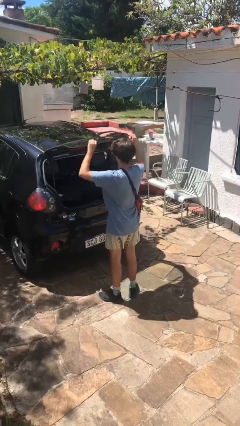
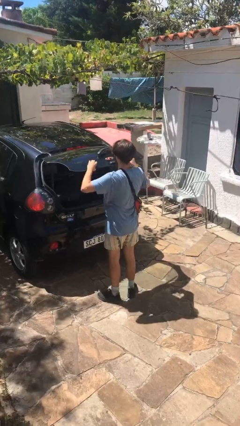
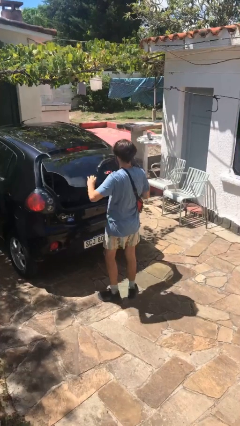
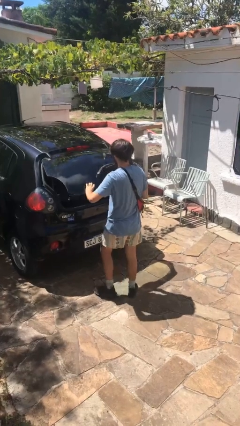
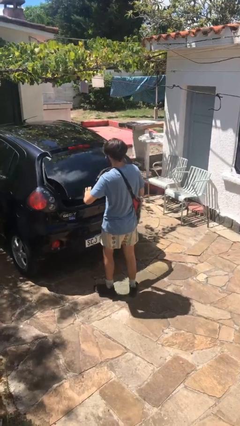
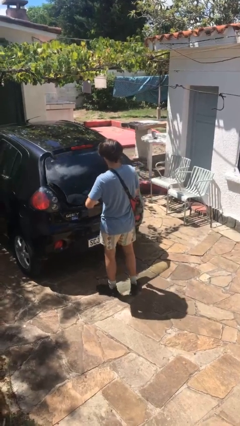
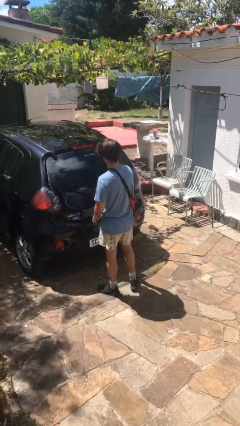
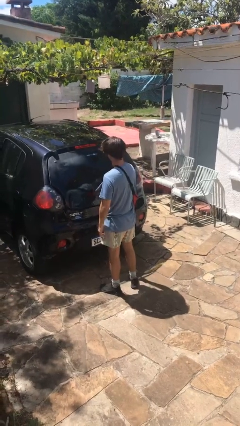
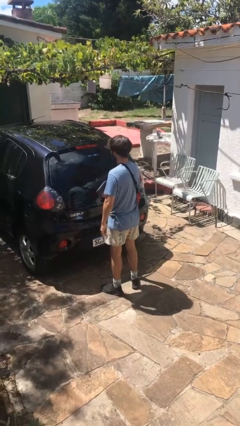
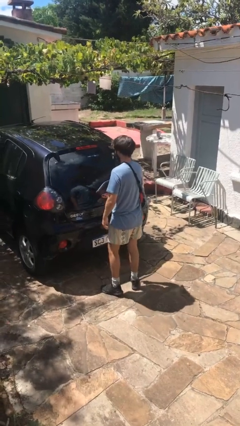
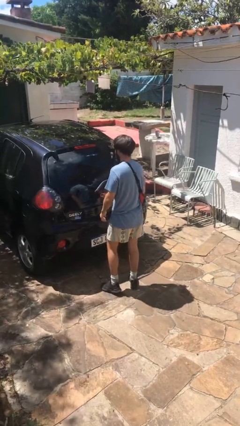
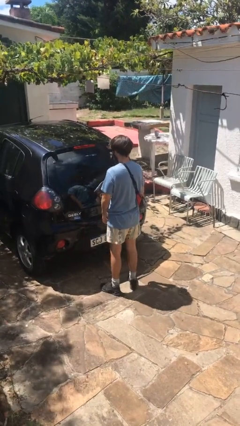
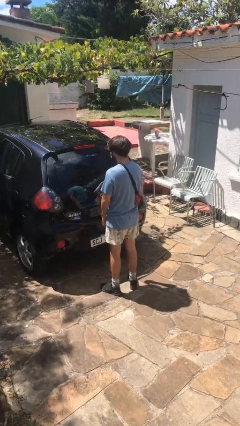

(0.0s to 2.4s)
person closes car trunk

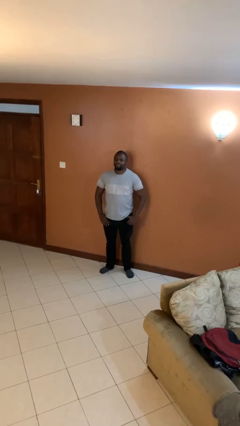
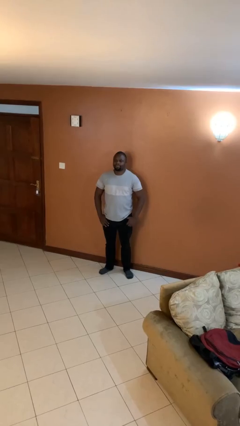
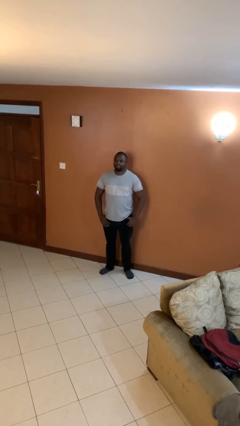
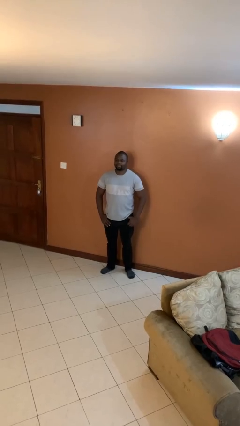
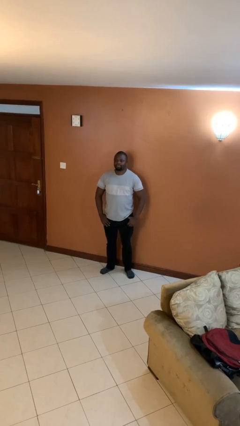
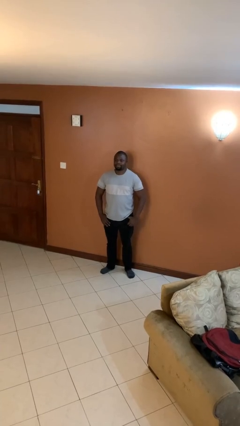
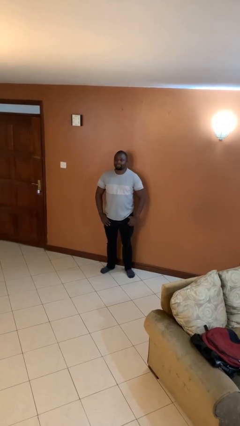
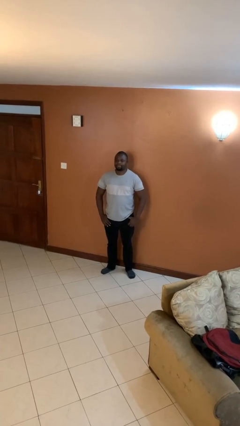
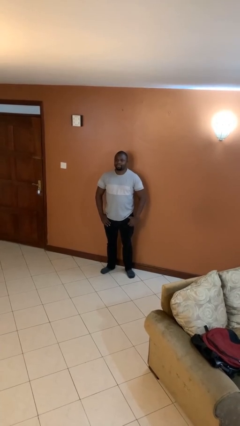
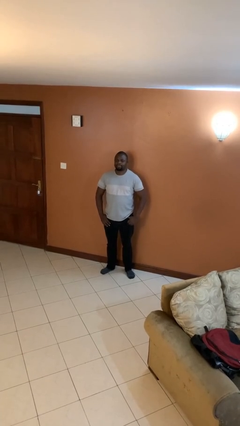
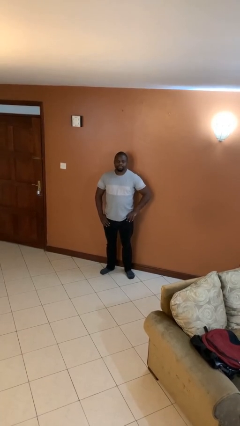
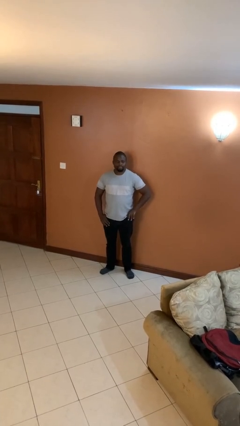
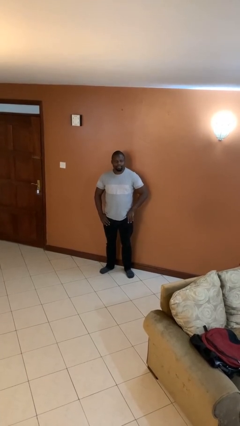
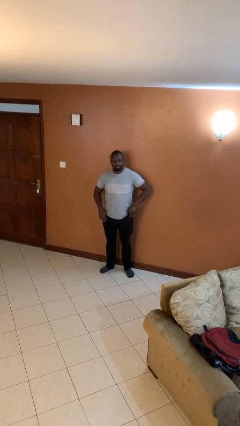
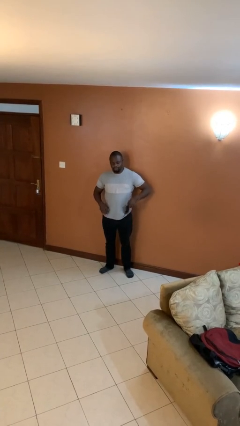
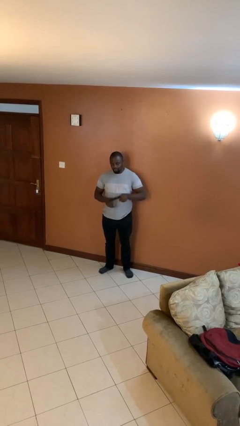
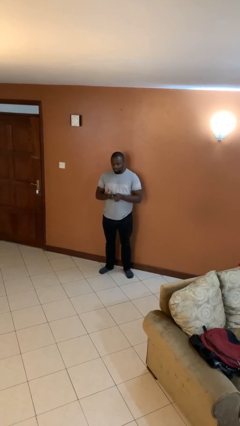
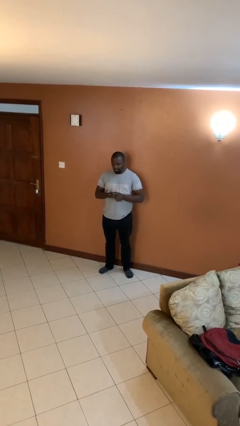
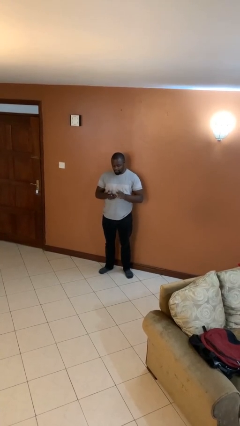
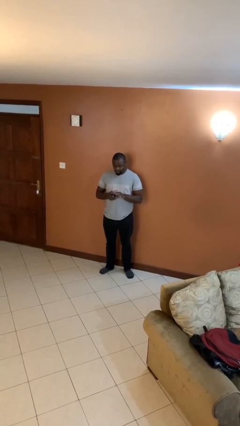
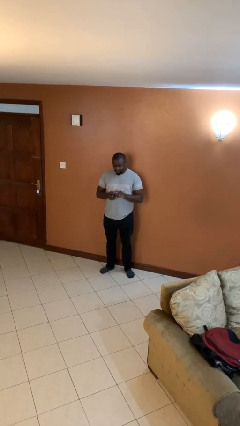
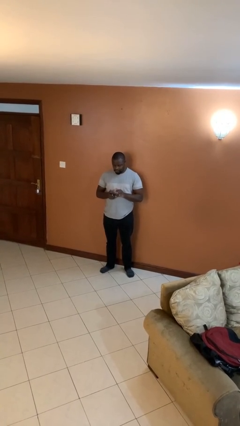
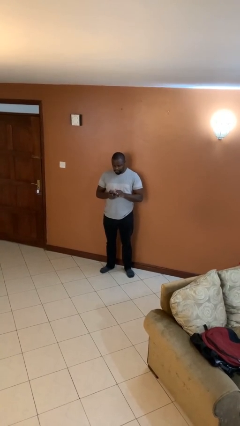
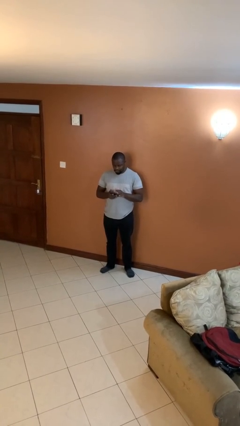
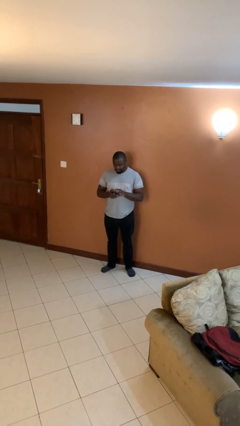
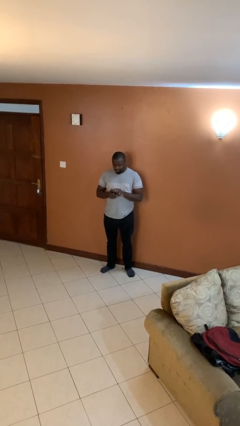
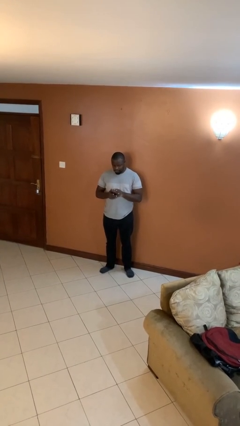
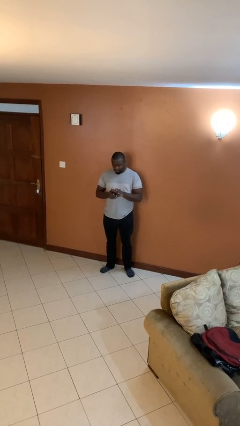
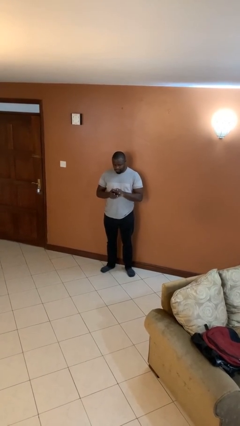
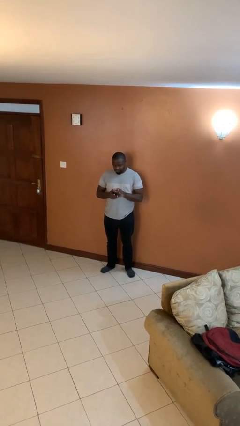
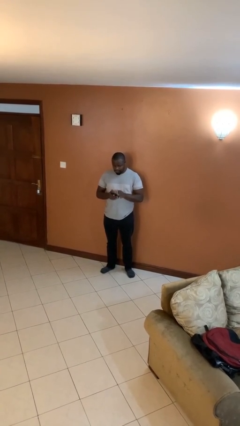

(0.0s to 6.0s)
person takes phone from pocket

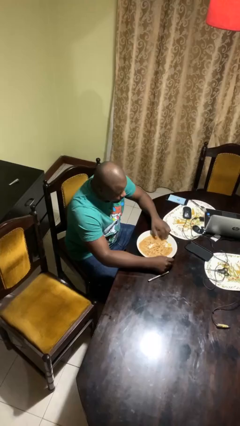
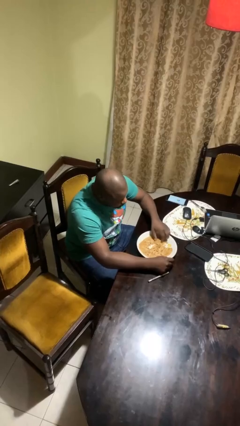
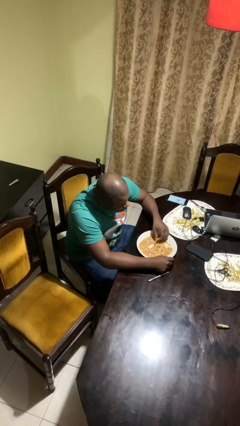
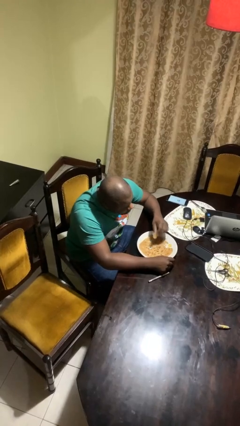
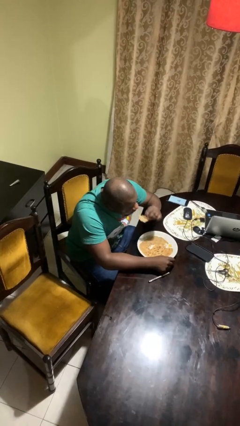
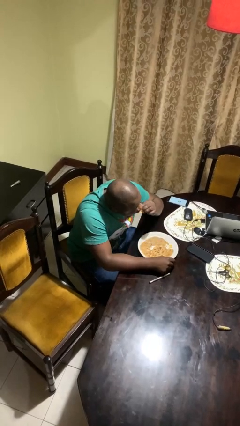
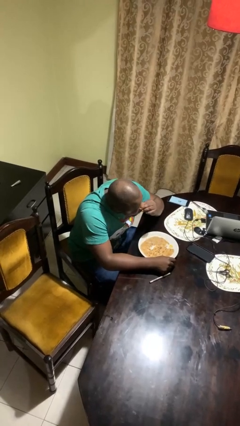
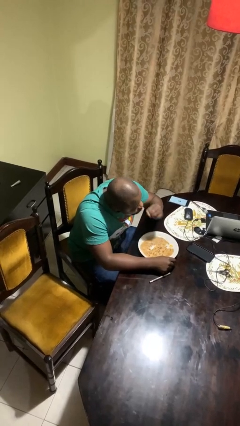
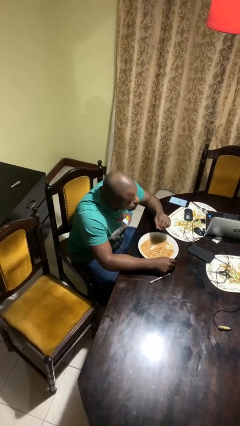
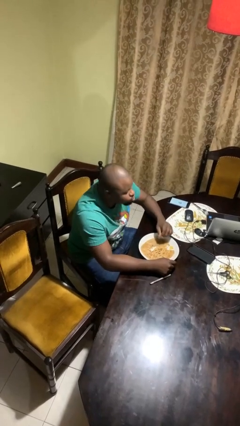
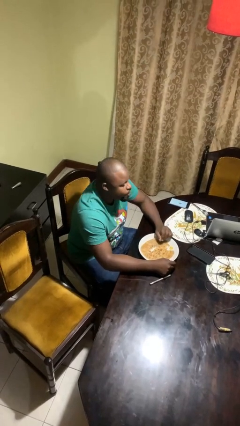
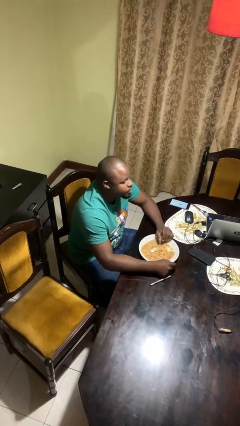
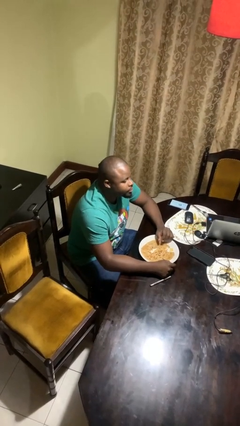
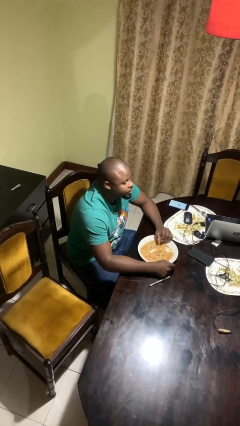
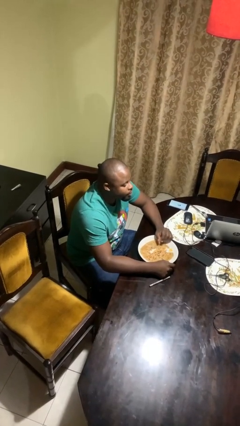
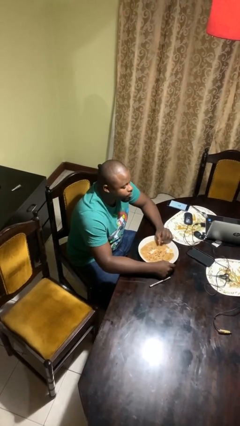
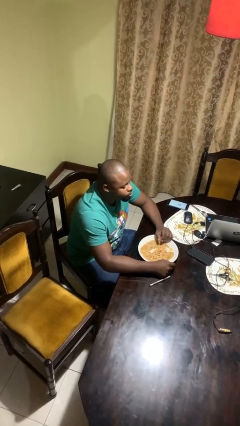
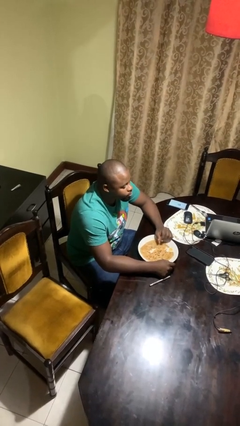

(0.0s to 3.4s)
person eats with hands

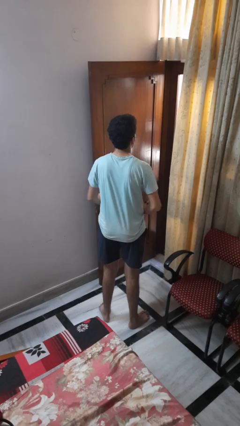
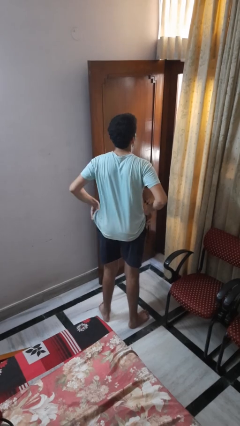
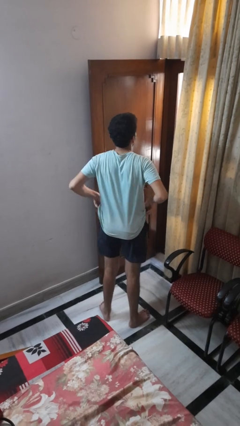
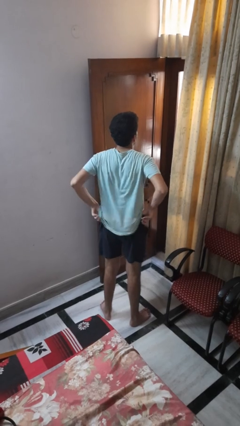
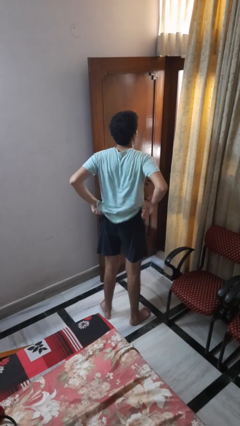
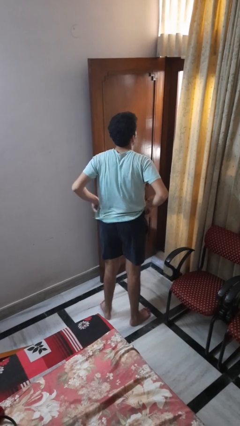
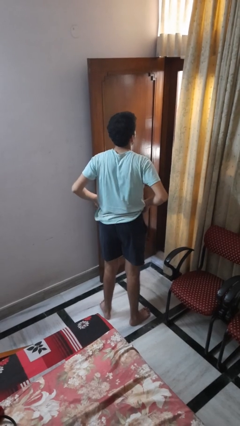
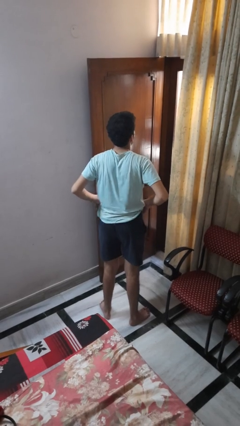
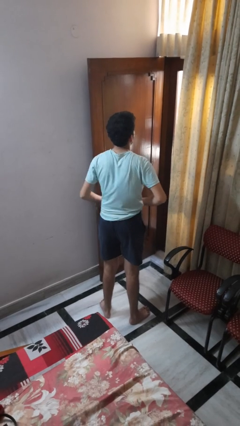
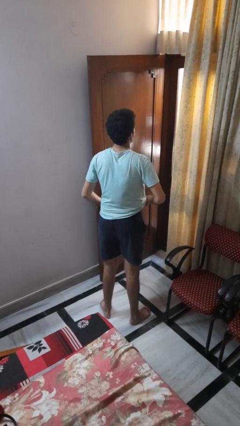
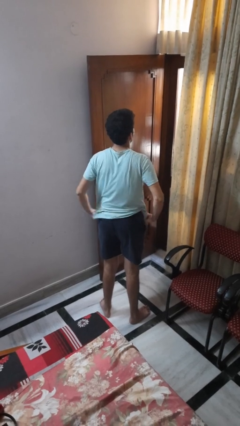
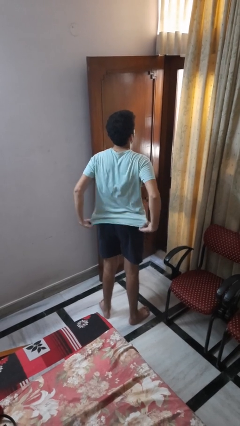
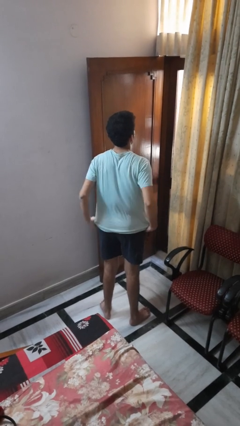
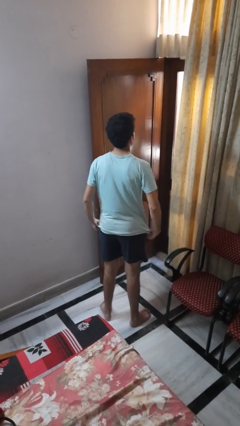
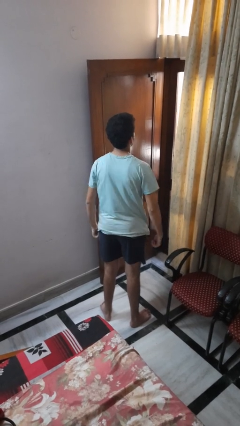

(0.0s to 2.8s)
person hikes up pants

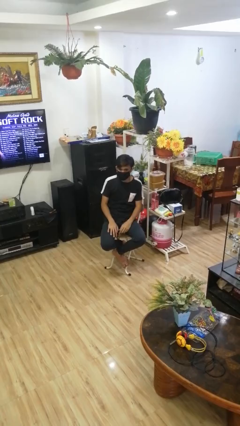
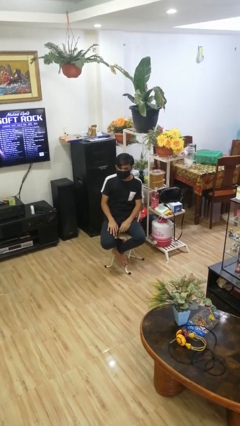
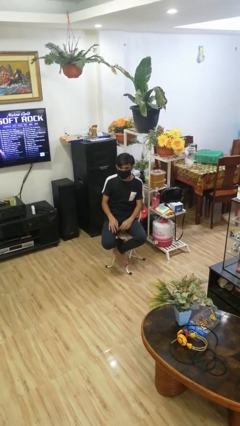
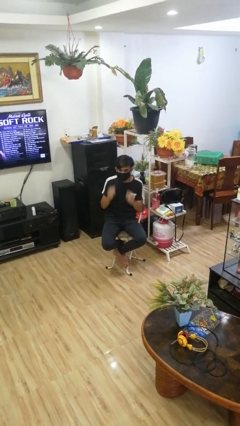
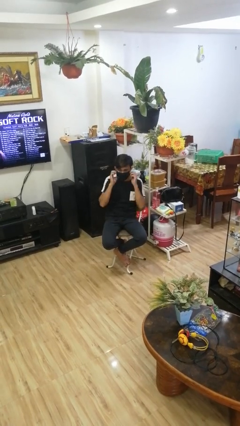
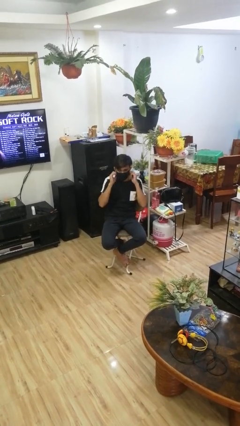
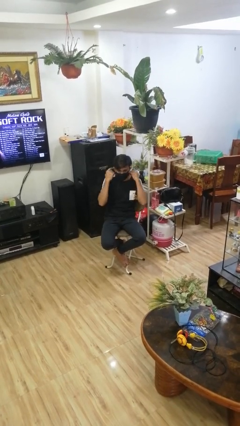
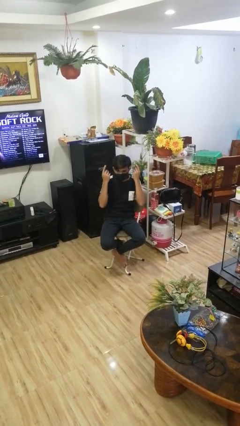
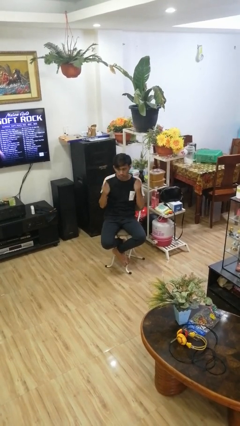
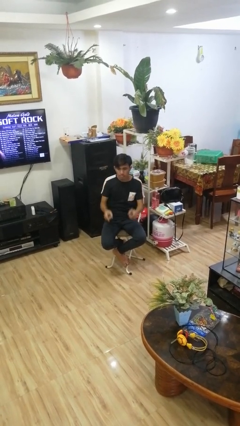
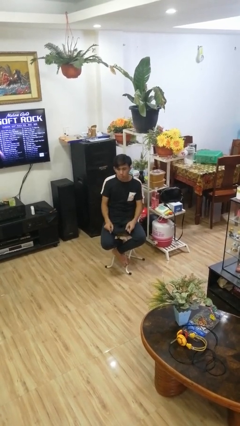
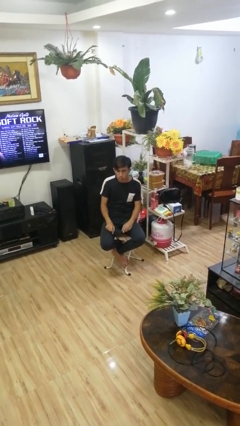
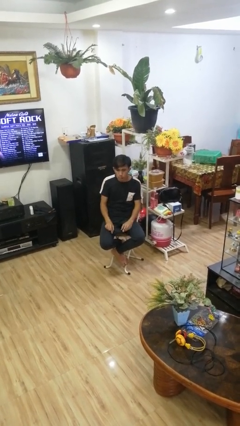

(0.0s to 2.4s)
person takes off facemask

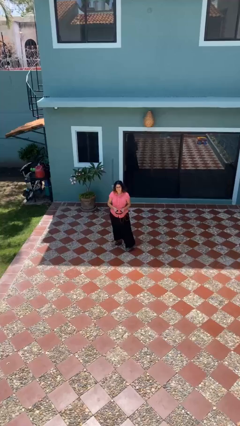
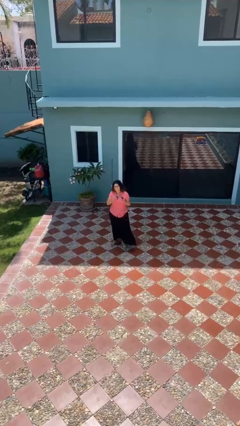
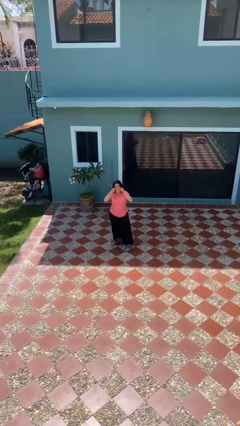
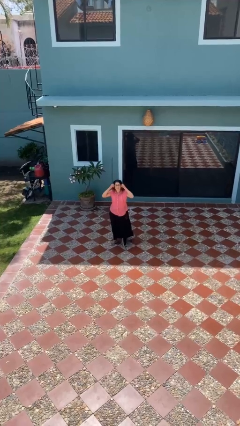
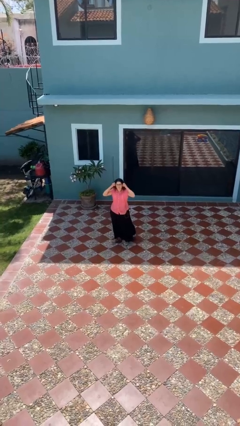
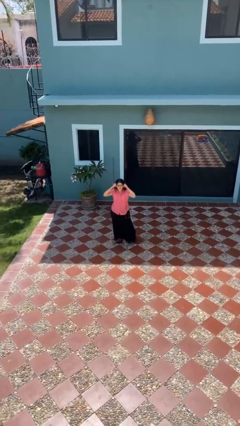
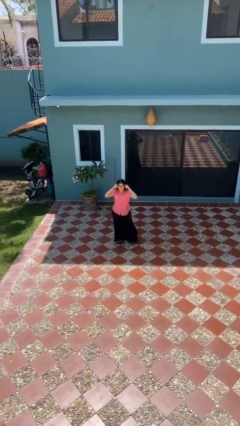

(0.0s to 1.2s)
person puts on headphones
